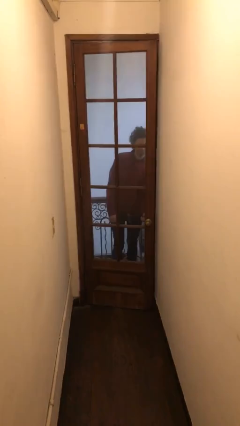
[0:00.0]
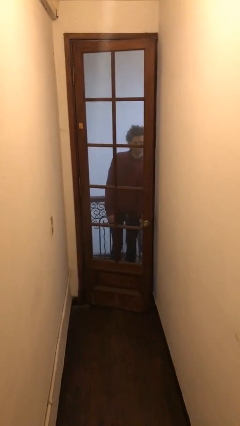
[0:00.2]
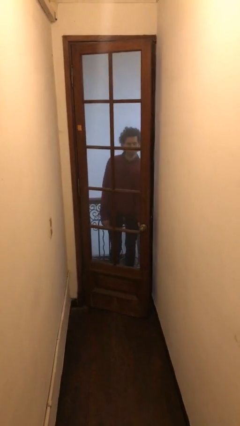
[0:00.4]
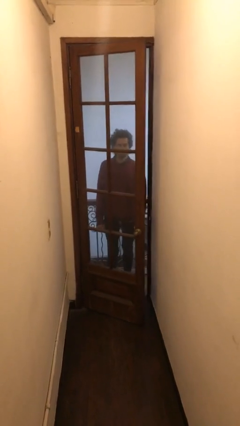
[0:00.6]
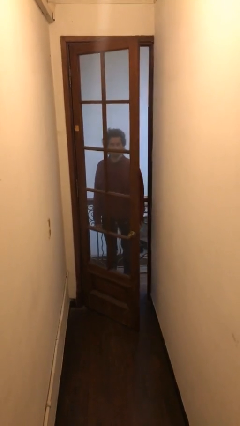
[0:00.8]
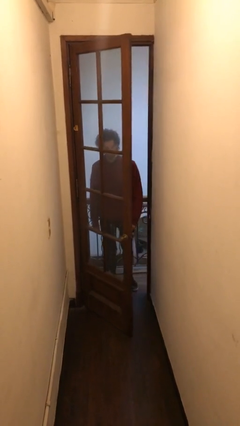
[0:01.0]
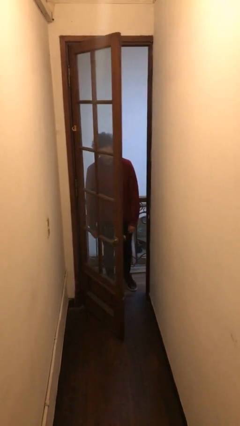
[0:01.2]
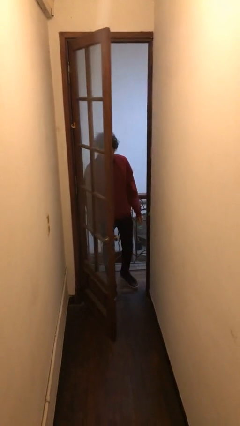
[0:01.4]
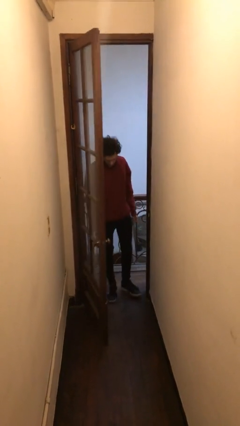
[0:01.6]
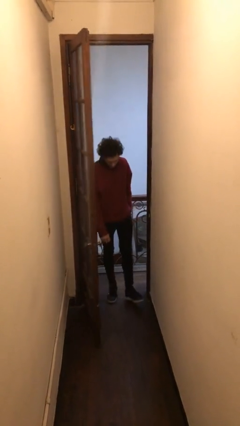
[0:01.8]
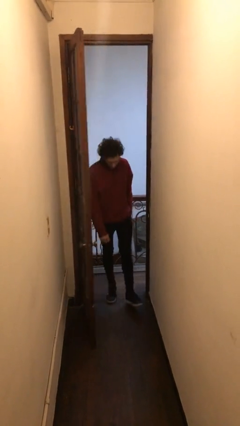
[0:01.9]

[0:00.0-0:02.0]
person opens facility door

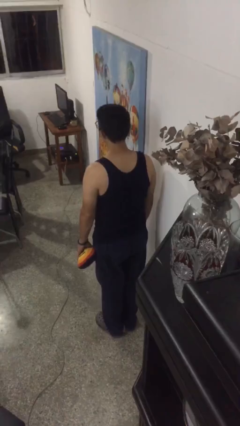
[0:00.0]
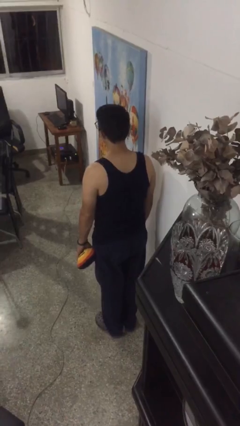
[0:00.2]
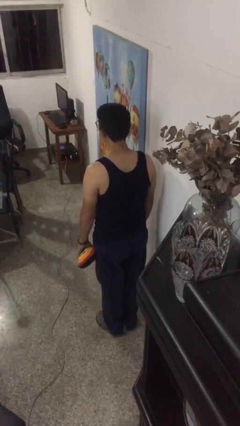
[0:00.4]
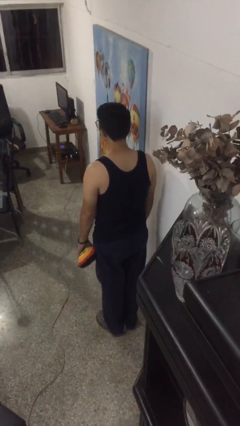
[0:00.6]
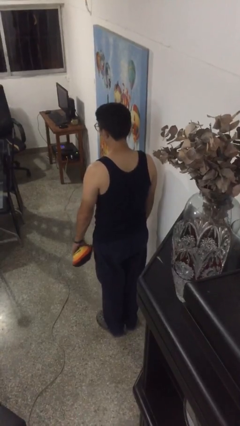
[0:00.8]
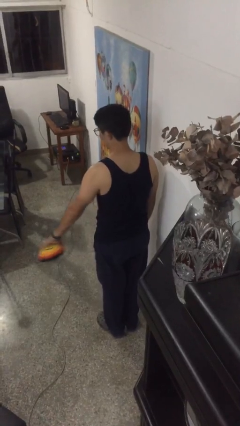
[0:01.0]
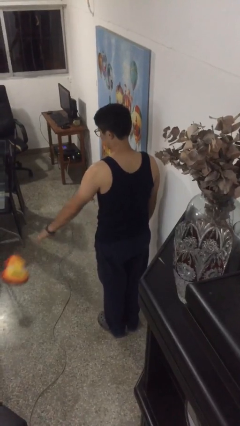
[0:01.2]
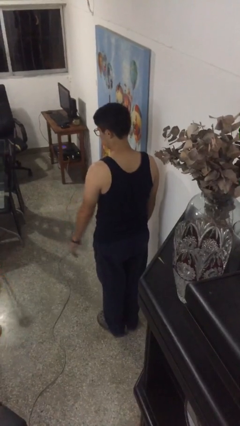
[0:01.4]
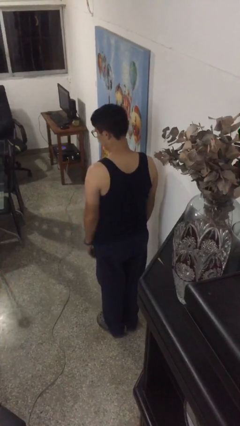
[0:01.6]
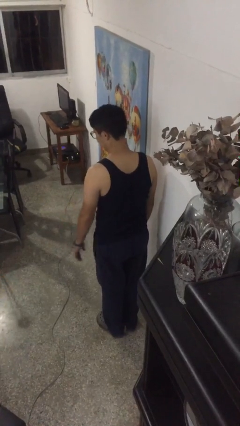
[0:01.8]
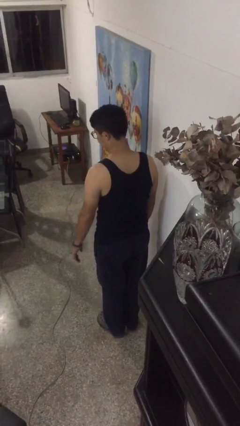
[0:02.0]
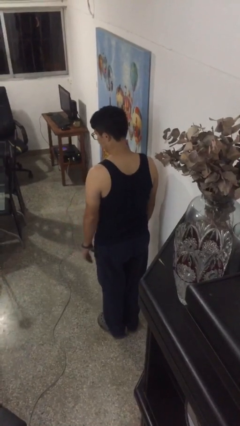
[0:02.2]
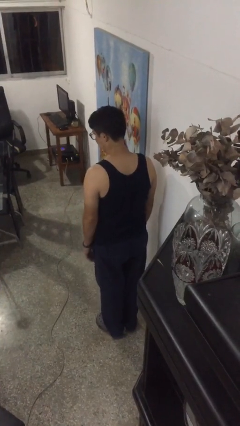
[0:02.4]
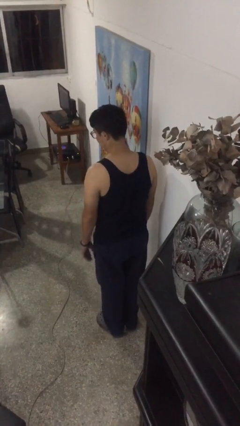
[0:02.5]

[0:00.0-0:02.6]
person throws object to ground

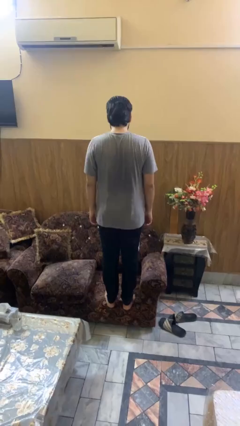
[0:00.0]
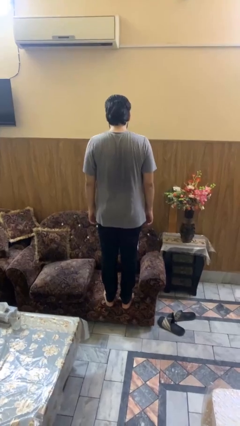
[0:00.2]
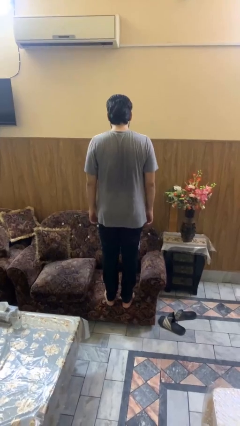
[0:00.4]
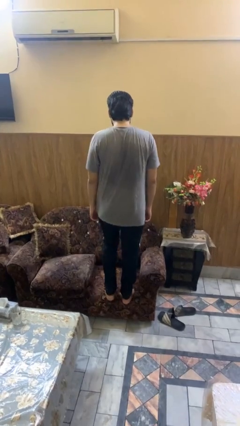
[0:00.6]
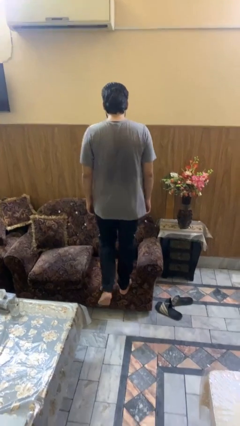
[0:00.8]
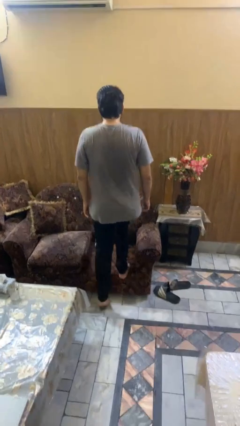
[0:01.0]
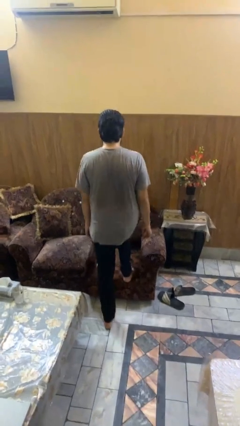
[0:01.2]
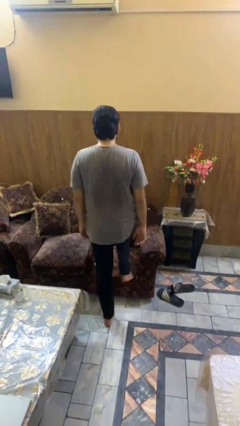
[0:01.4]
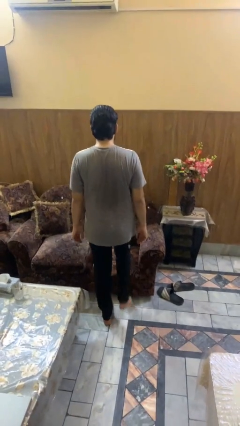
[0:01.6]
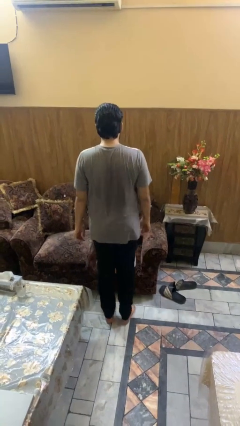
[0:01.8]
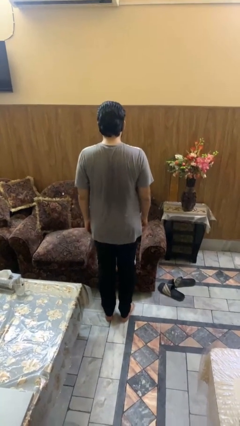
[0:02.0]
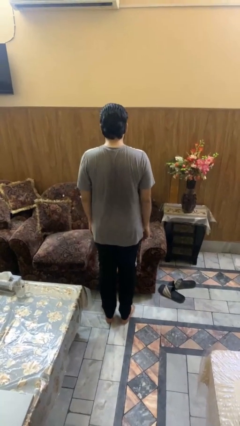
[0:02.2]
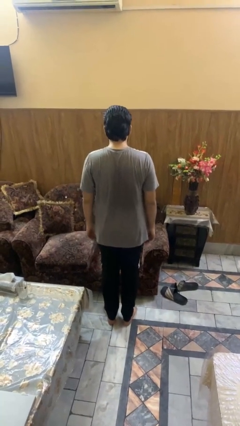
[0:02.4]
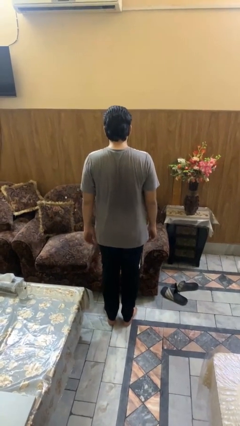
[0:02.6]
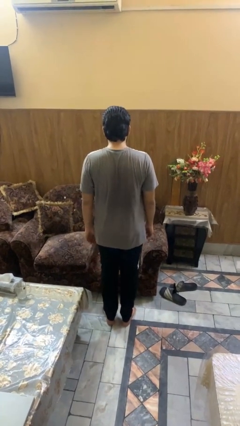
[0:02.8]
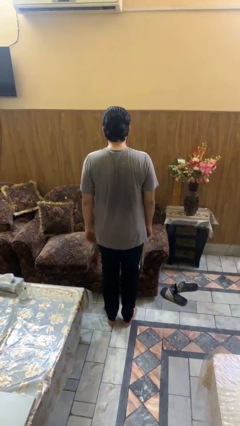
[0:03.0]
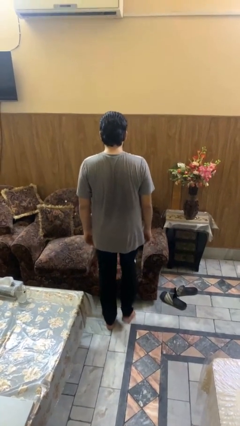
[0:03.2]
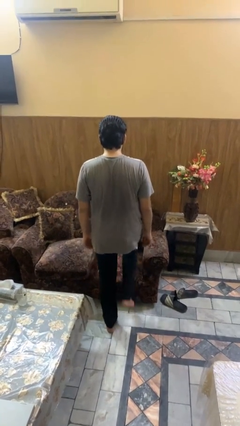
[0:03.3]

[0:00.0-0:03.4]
person climbs off couch

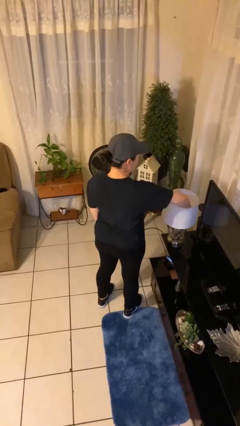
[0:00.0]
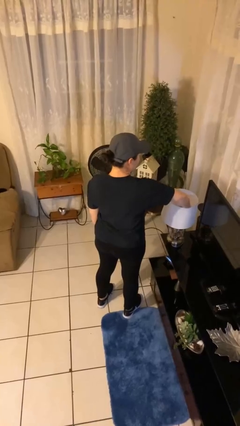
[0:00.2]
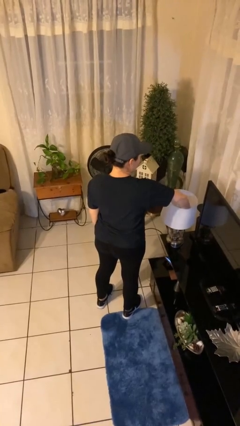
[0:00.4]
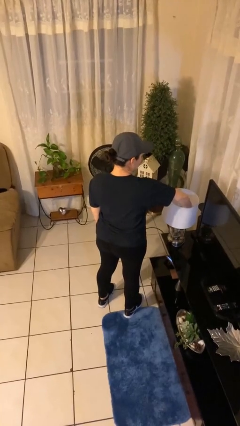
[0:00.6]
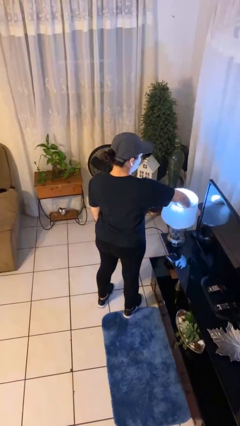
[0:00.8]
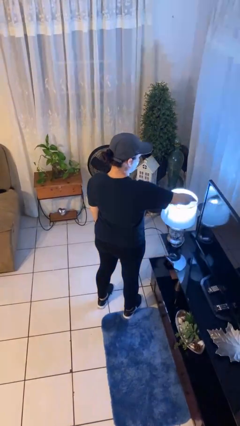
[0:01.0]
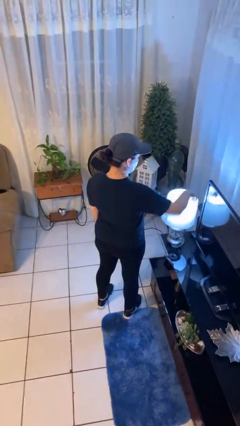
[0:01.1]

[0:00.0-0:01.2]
person turns on lamp

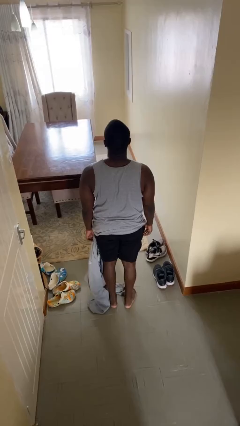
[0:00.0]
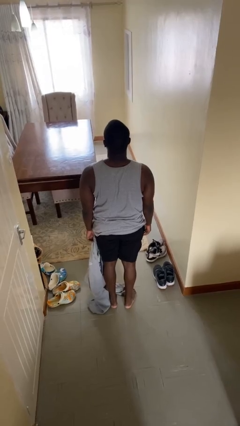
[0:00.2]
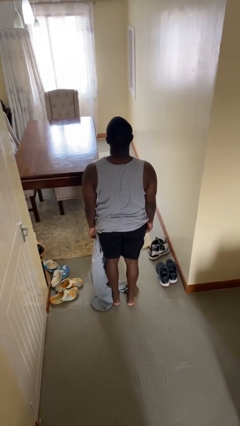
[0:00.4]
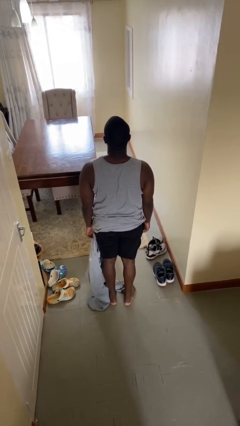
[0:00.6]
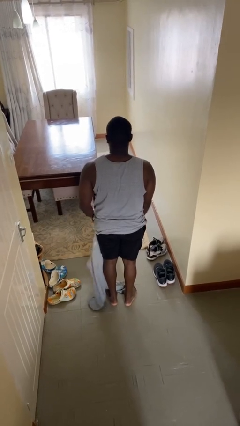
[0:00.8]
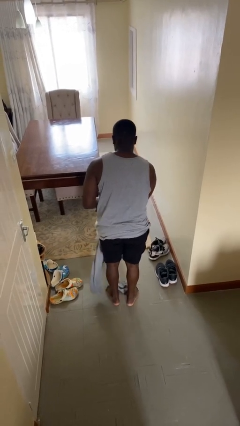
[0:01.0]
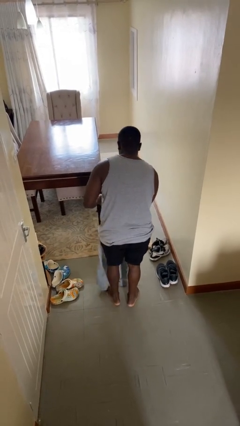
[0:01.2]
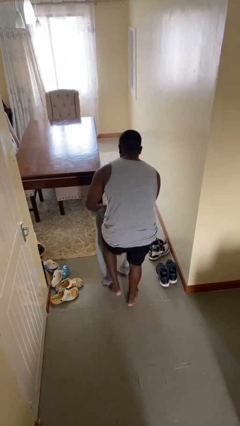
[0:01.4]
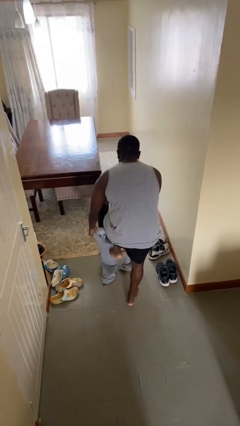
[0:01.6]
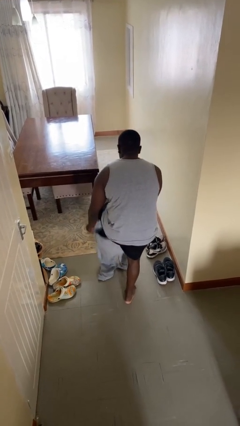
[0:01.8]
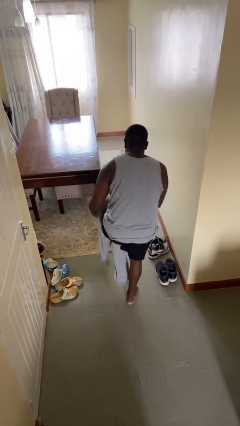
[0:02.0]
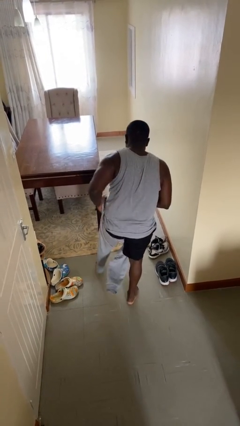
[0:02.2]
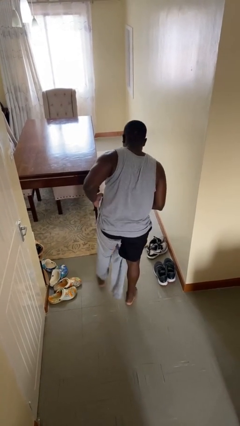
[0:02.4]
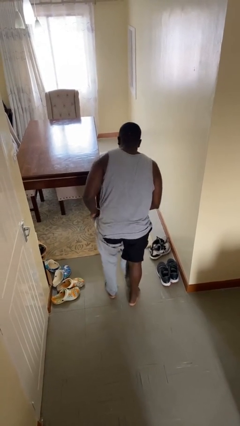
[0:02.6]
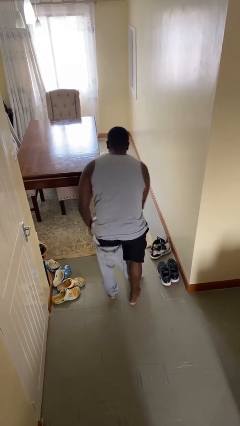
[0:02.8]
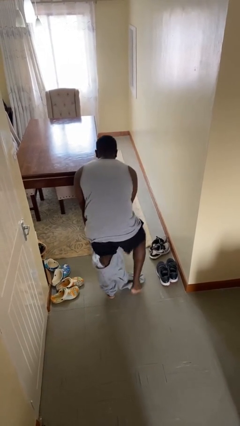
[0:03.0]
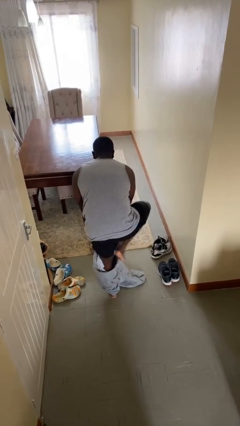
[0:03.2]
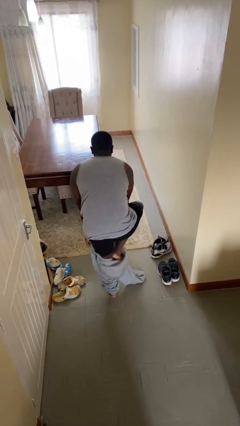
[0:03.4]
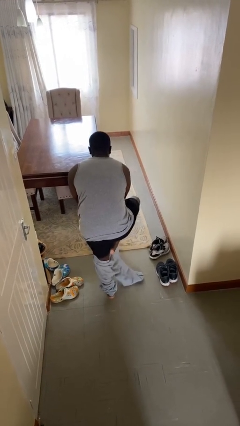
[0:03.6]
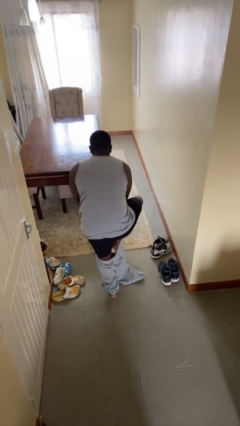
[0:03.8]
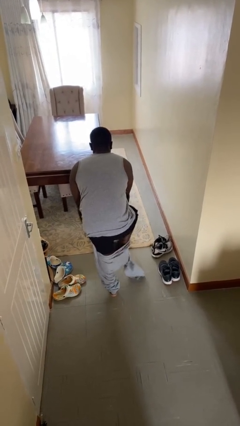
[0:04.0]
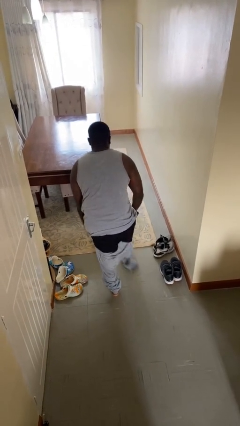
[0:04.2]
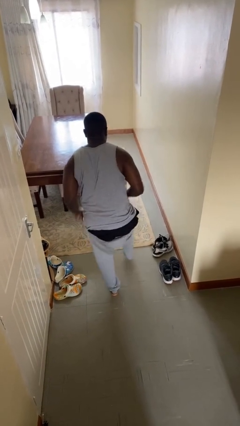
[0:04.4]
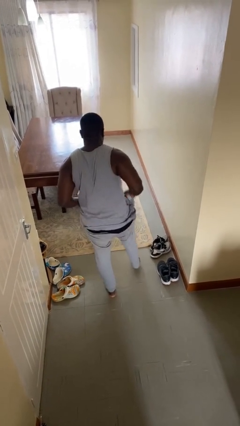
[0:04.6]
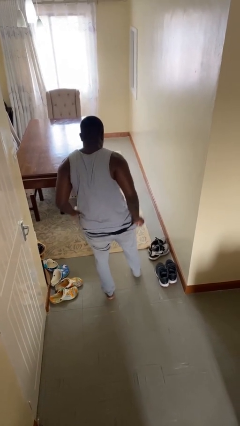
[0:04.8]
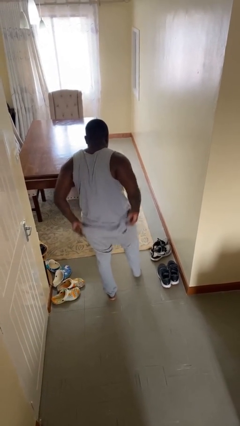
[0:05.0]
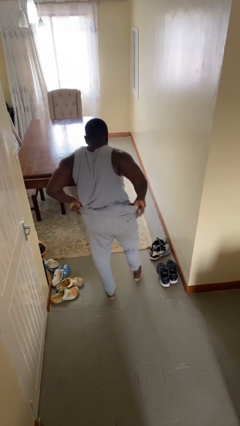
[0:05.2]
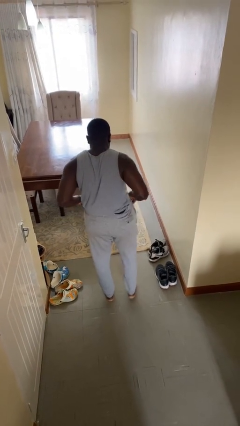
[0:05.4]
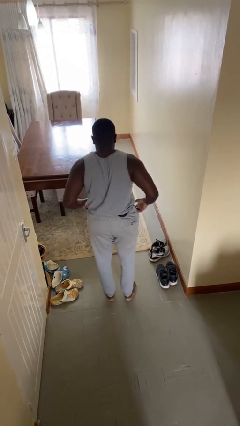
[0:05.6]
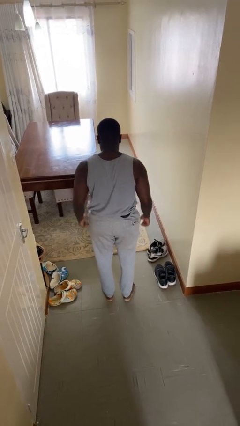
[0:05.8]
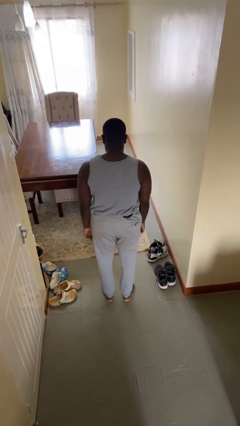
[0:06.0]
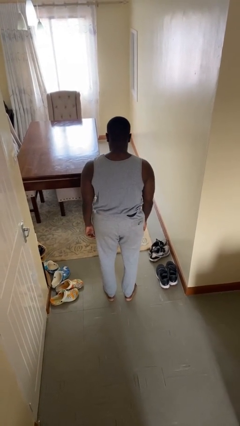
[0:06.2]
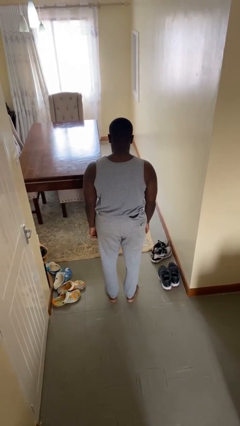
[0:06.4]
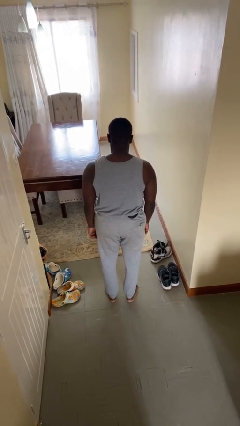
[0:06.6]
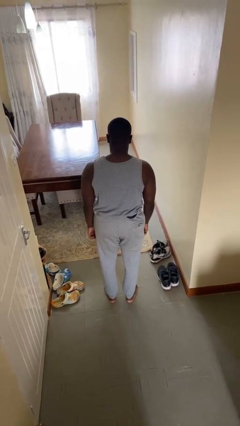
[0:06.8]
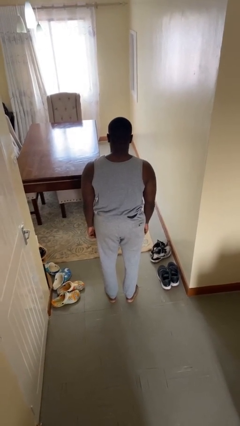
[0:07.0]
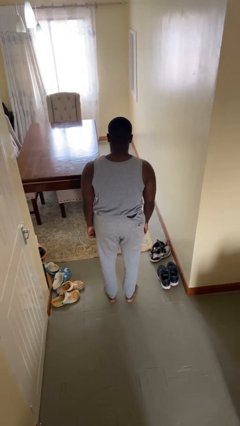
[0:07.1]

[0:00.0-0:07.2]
person puts on pants

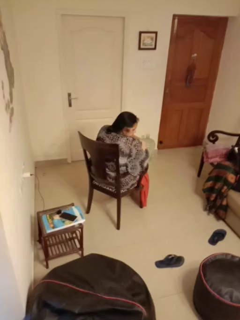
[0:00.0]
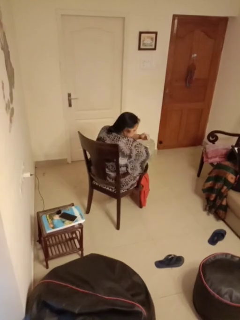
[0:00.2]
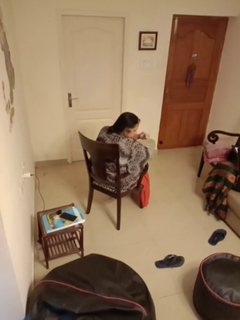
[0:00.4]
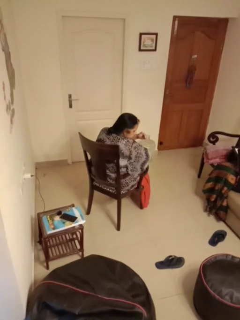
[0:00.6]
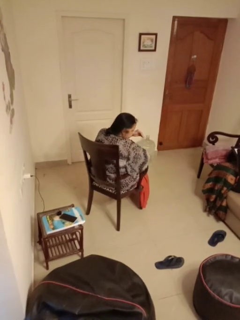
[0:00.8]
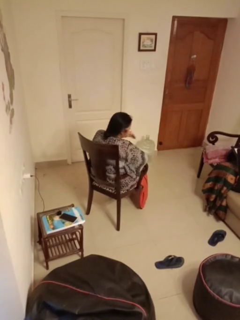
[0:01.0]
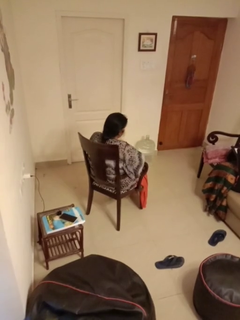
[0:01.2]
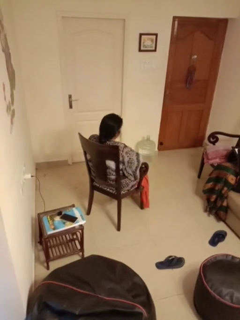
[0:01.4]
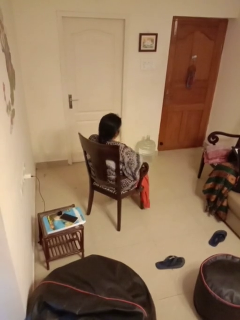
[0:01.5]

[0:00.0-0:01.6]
person swats bug
